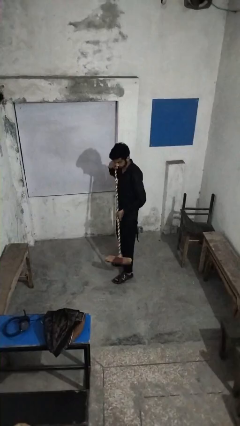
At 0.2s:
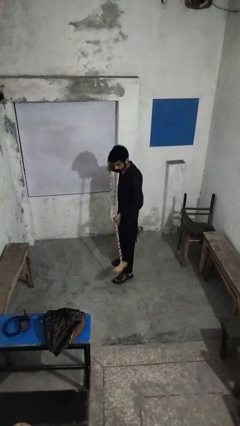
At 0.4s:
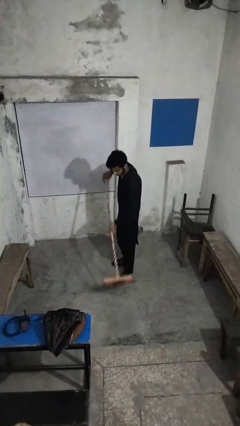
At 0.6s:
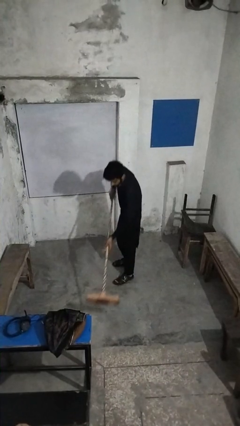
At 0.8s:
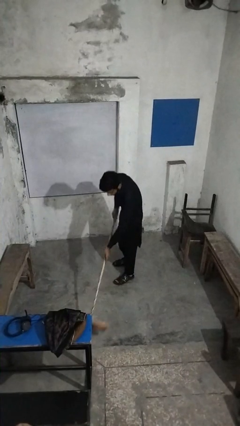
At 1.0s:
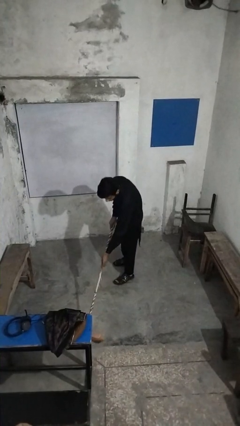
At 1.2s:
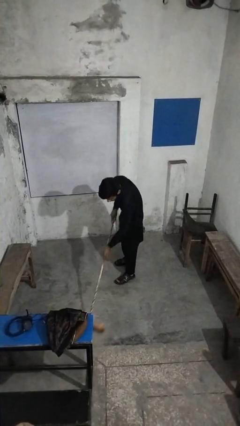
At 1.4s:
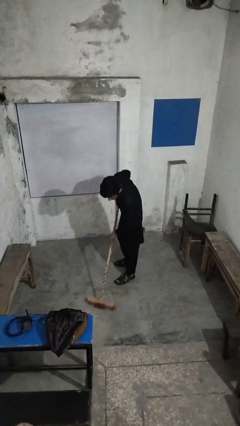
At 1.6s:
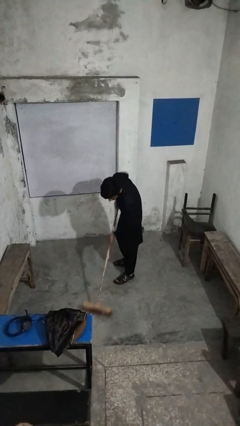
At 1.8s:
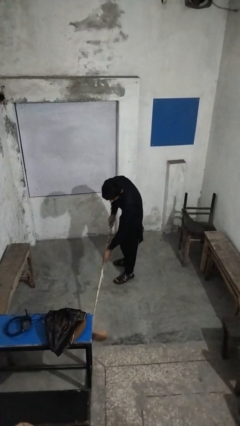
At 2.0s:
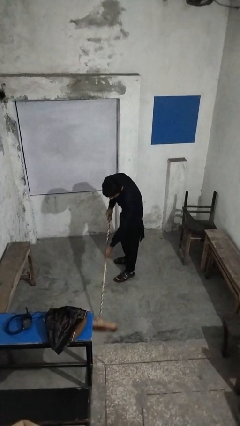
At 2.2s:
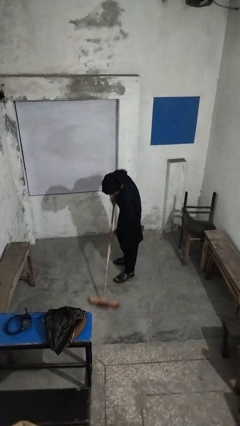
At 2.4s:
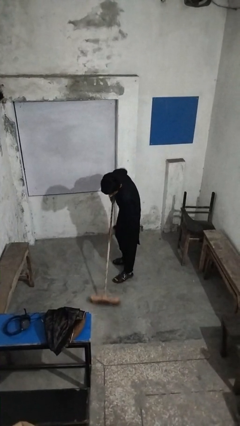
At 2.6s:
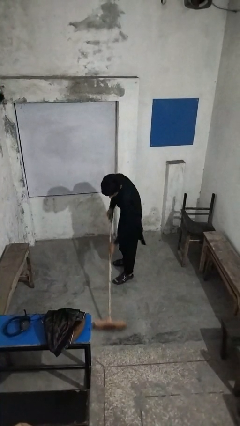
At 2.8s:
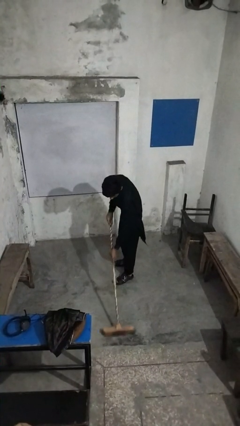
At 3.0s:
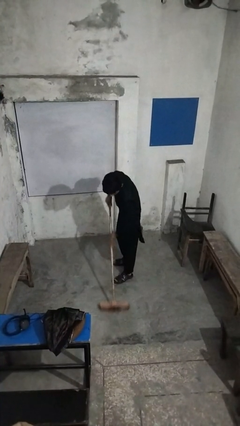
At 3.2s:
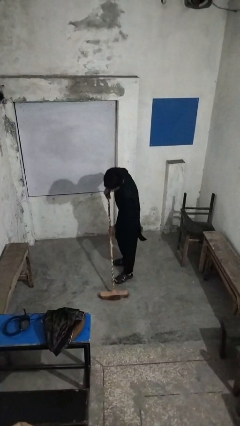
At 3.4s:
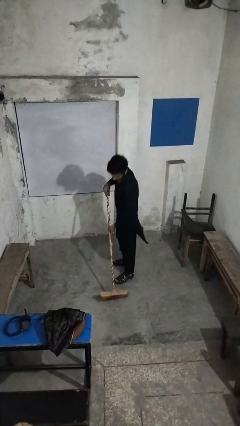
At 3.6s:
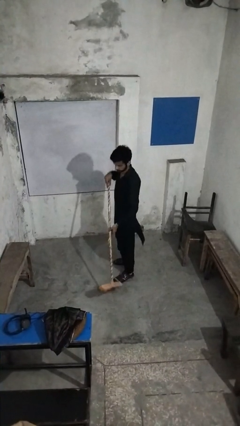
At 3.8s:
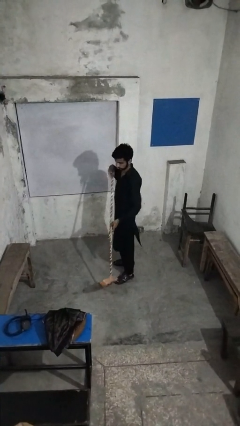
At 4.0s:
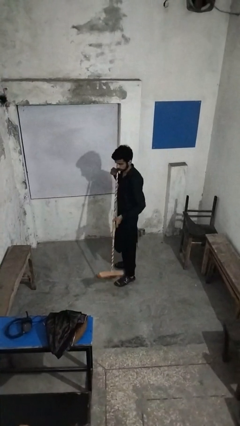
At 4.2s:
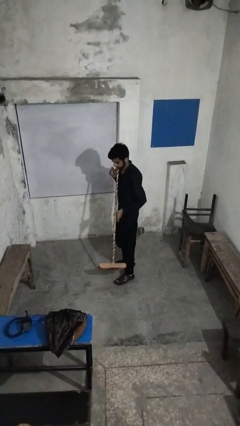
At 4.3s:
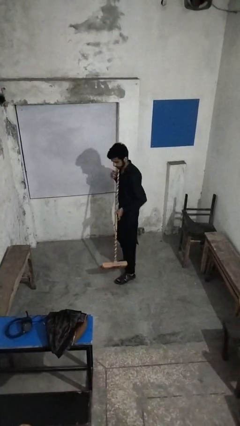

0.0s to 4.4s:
person sweeps floor

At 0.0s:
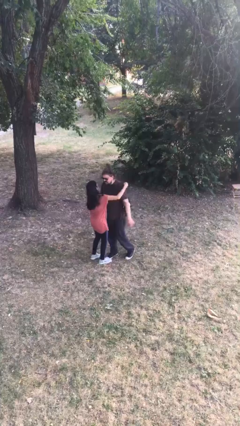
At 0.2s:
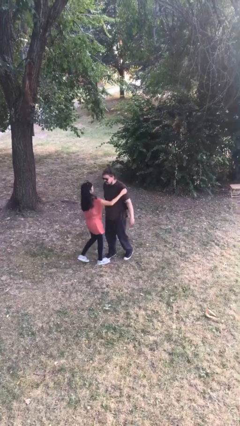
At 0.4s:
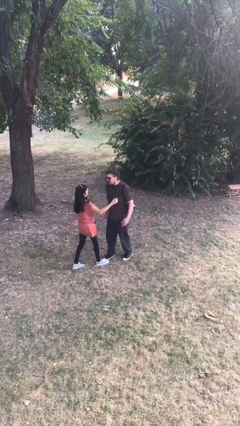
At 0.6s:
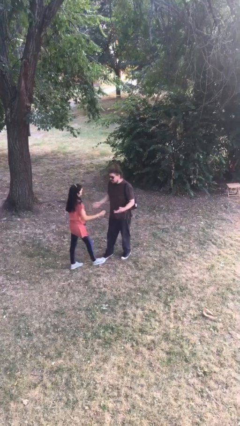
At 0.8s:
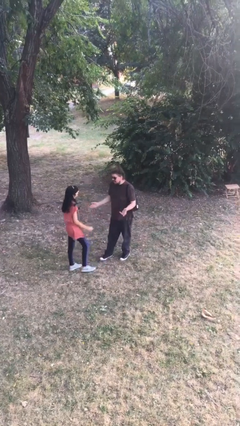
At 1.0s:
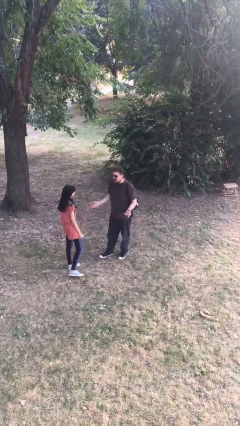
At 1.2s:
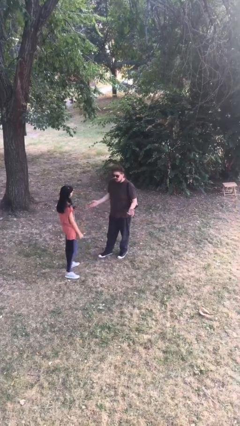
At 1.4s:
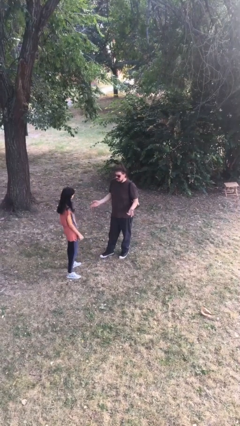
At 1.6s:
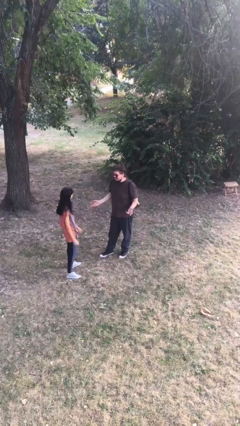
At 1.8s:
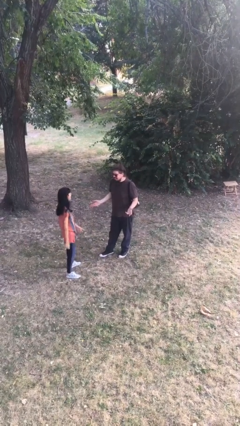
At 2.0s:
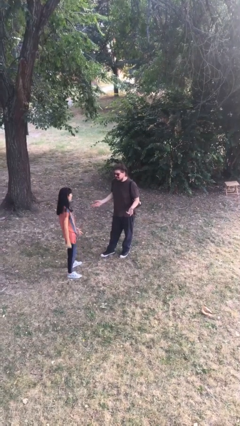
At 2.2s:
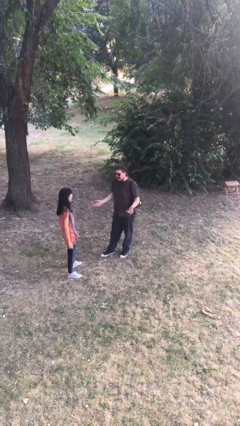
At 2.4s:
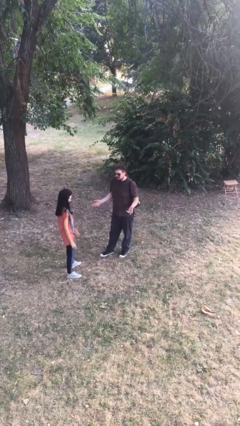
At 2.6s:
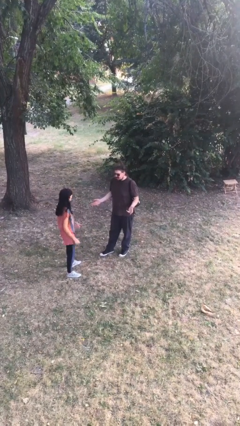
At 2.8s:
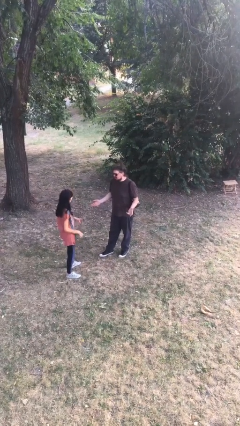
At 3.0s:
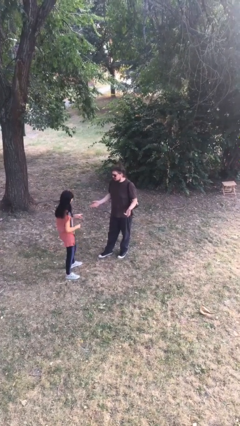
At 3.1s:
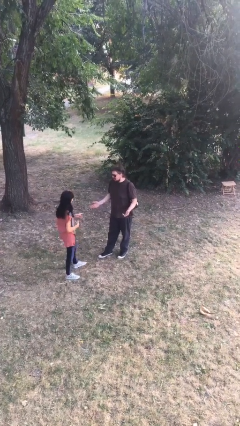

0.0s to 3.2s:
person talks to person

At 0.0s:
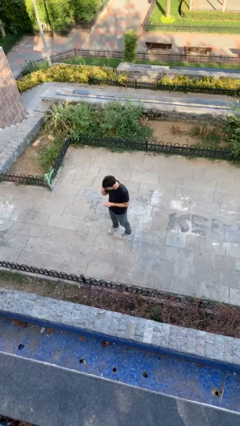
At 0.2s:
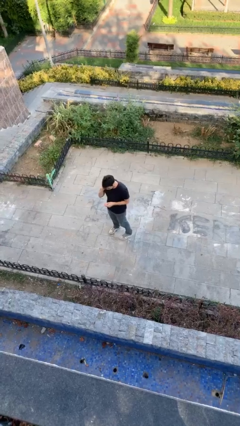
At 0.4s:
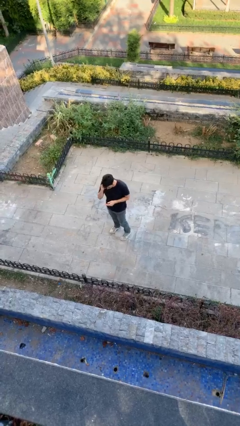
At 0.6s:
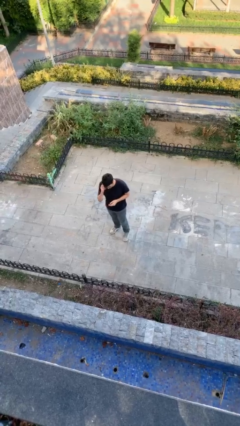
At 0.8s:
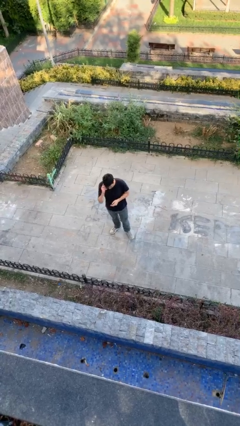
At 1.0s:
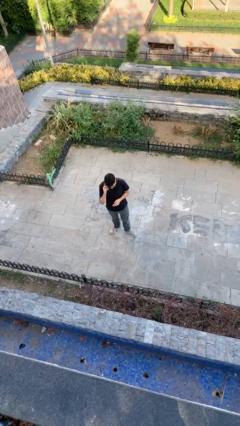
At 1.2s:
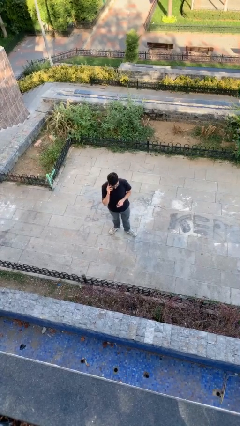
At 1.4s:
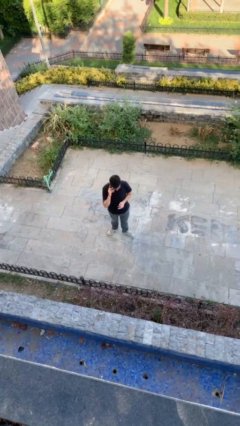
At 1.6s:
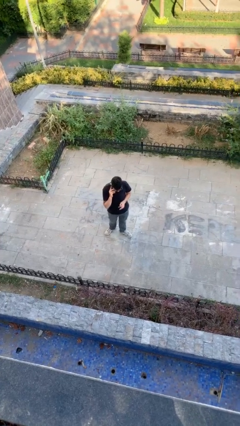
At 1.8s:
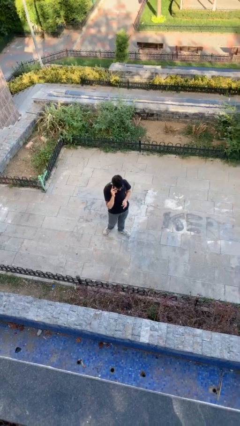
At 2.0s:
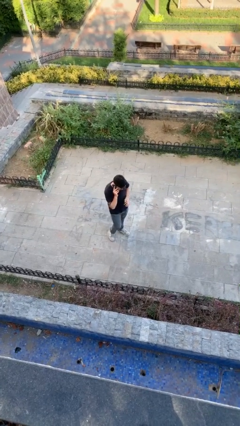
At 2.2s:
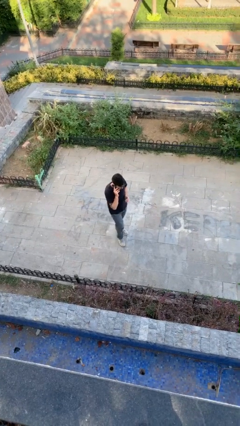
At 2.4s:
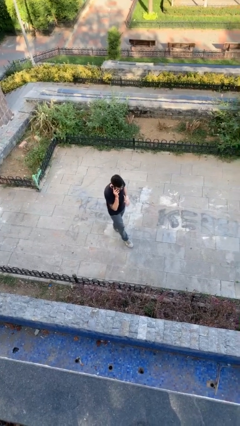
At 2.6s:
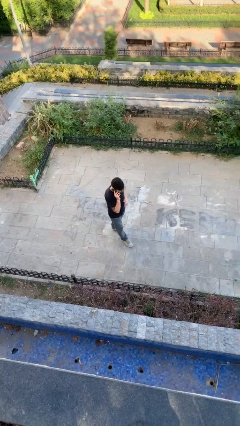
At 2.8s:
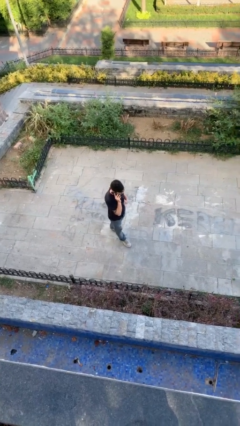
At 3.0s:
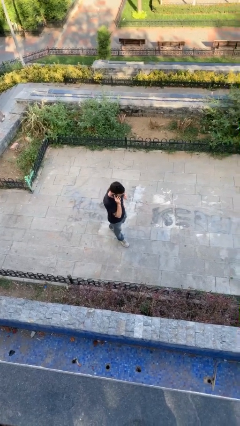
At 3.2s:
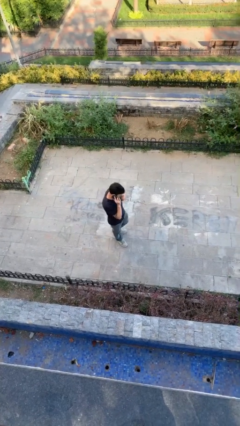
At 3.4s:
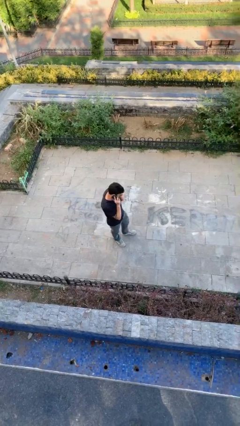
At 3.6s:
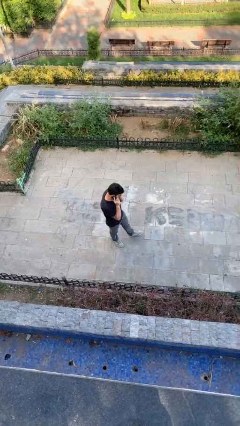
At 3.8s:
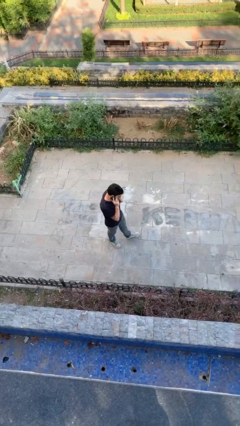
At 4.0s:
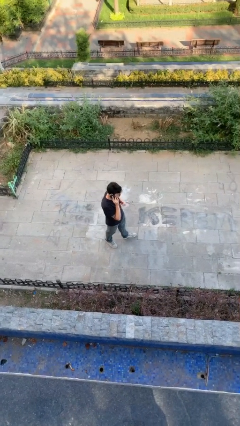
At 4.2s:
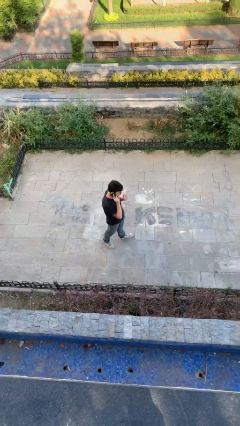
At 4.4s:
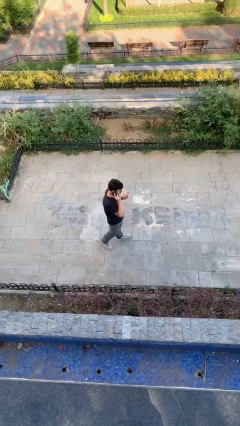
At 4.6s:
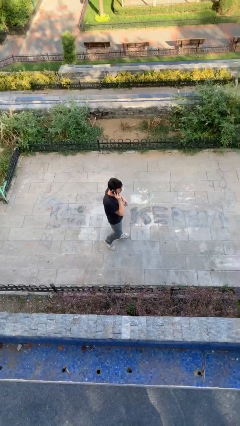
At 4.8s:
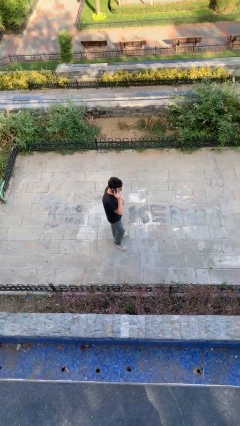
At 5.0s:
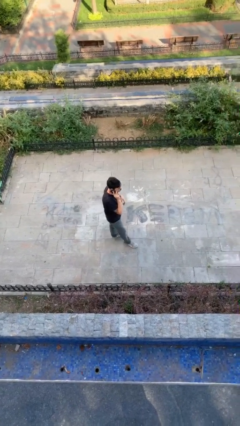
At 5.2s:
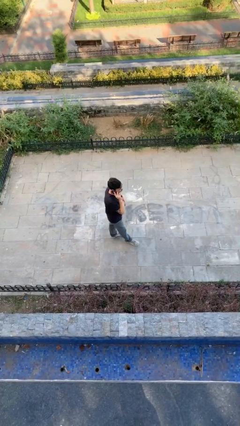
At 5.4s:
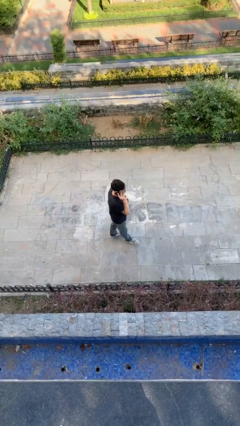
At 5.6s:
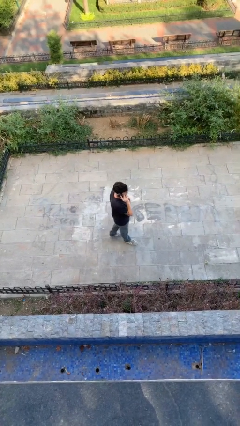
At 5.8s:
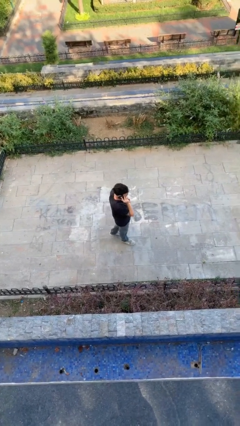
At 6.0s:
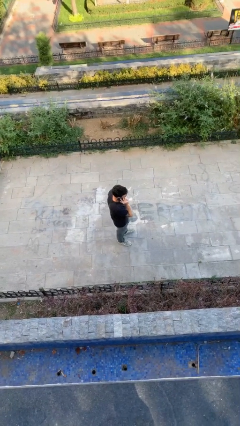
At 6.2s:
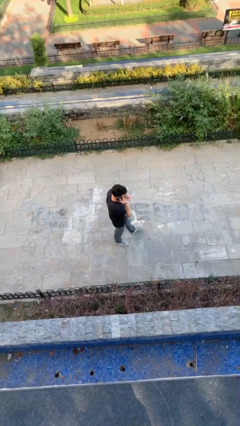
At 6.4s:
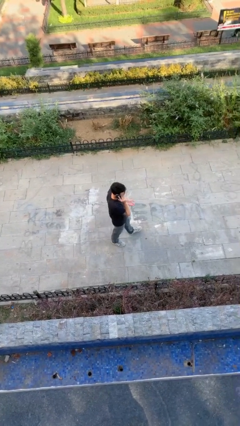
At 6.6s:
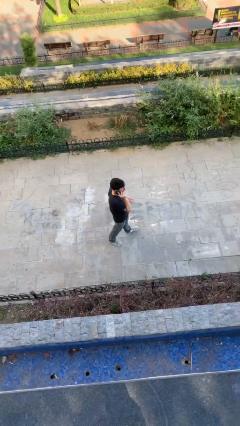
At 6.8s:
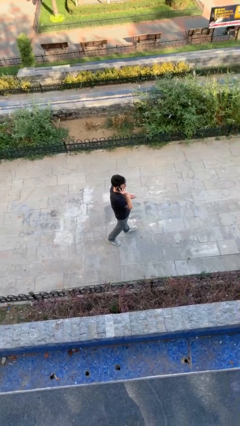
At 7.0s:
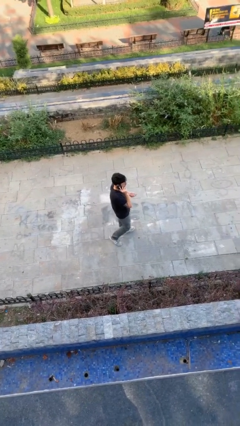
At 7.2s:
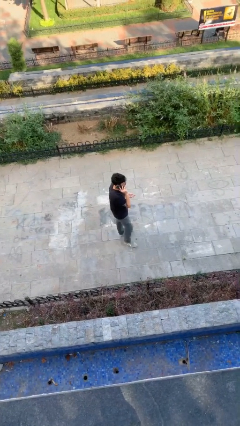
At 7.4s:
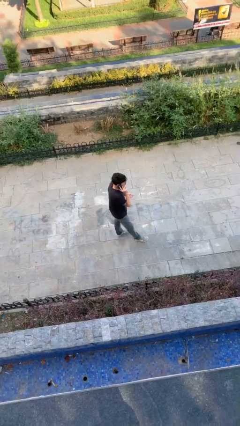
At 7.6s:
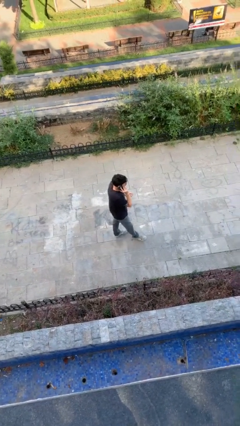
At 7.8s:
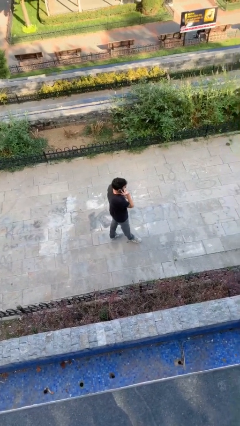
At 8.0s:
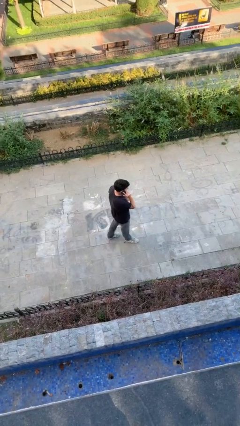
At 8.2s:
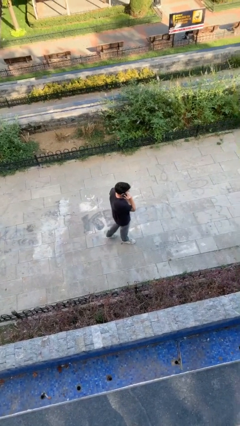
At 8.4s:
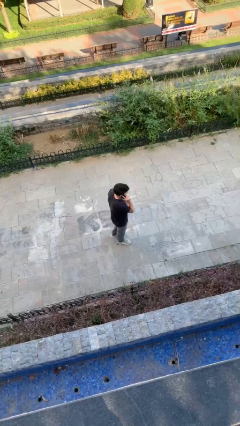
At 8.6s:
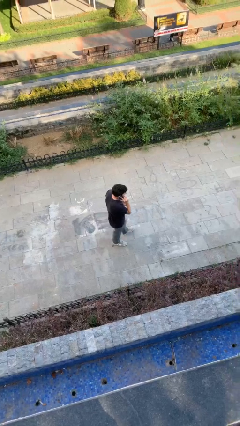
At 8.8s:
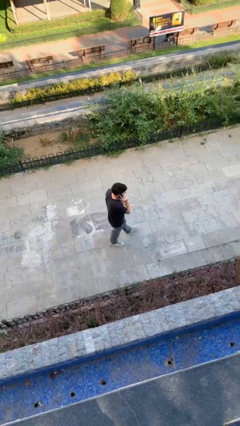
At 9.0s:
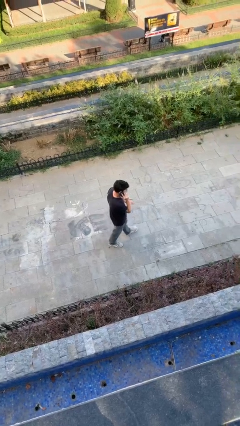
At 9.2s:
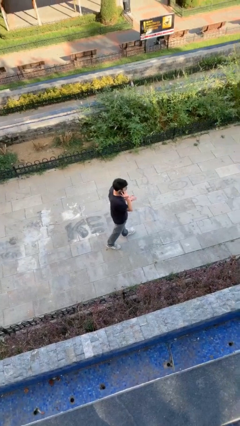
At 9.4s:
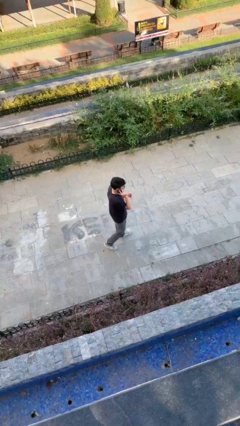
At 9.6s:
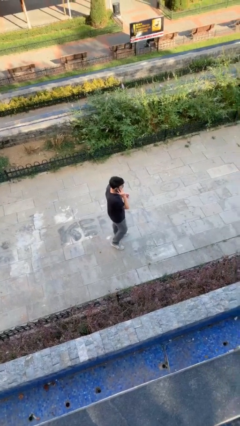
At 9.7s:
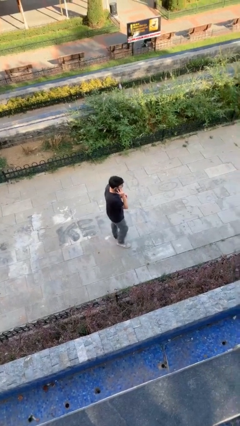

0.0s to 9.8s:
person talks on phone
